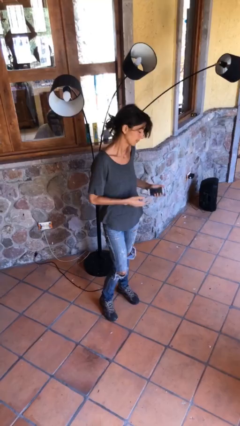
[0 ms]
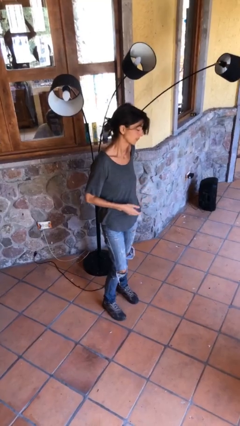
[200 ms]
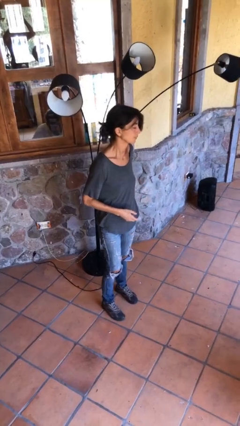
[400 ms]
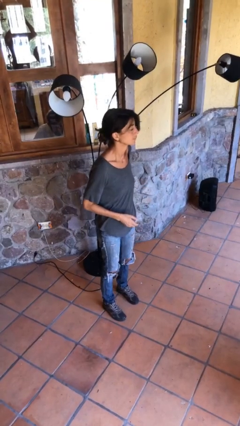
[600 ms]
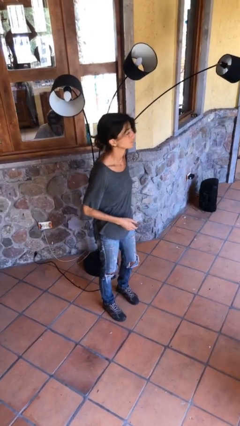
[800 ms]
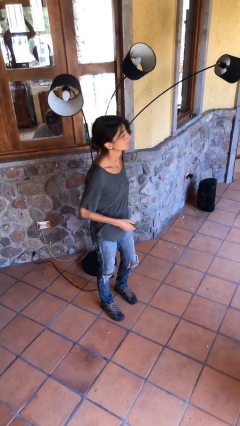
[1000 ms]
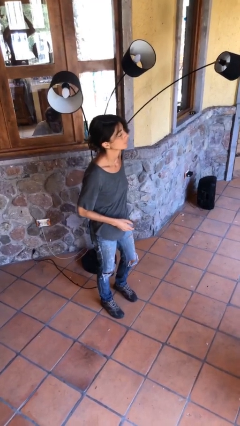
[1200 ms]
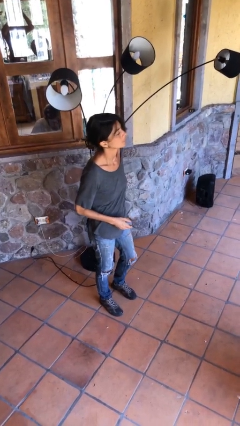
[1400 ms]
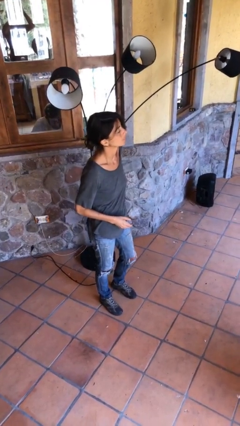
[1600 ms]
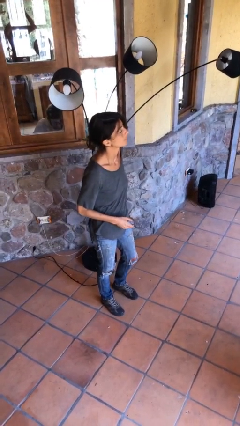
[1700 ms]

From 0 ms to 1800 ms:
person puts phone into pocket

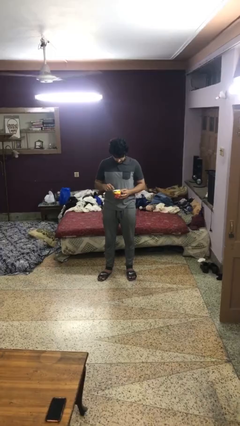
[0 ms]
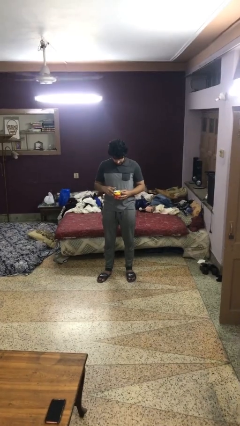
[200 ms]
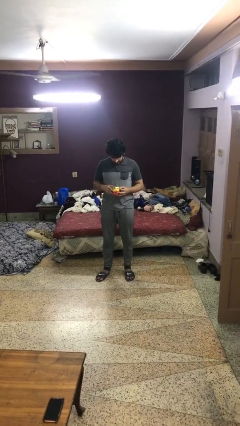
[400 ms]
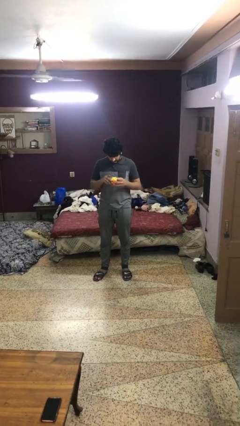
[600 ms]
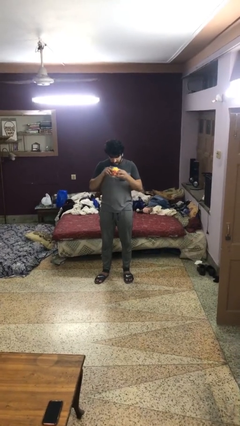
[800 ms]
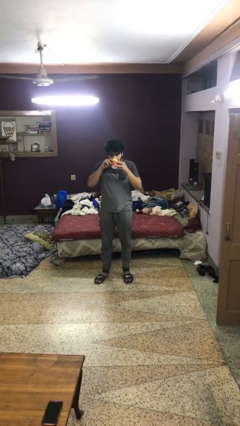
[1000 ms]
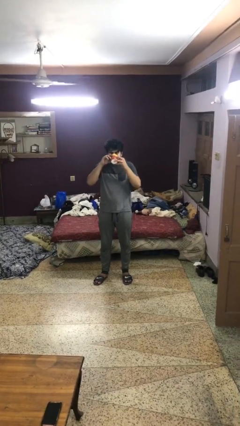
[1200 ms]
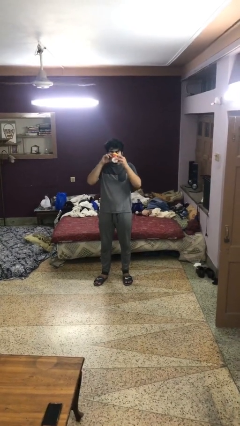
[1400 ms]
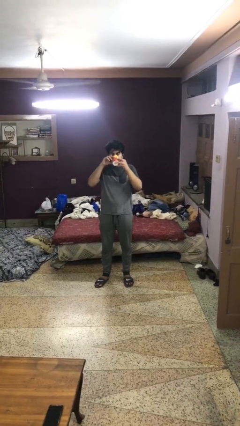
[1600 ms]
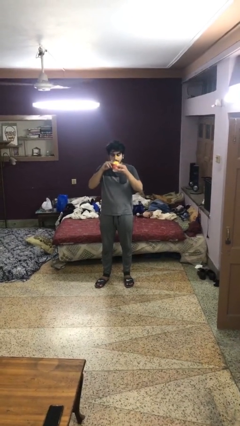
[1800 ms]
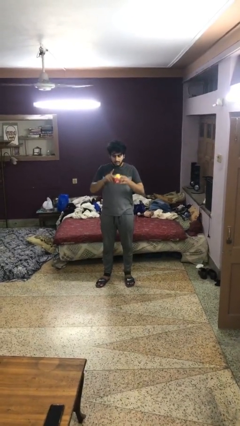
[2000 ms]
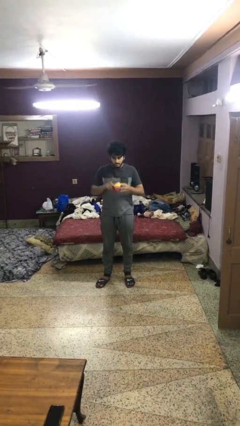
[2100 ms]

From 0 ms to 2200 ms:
person drinks from mug

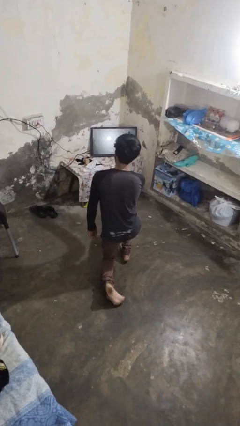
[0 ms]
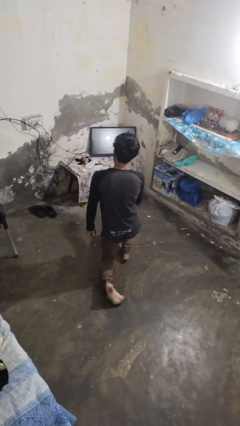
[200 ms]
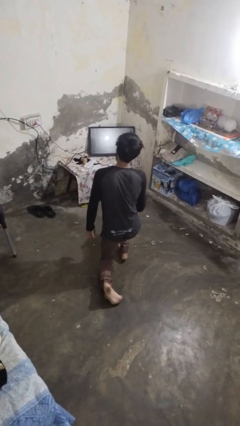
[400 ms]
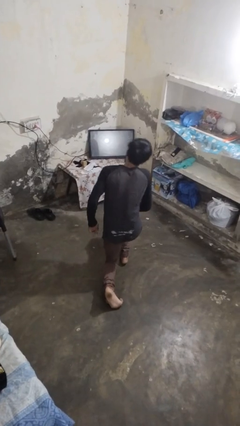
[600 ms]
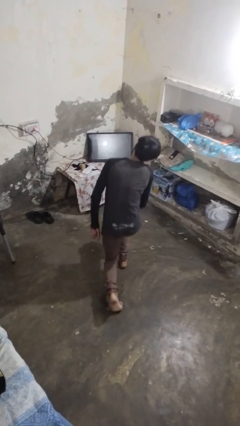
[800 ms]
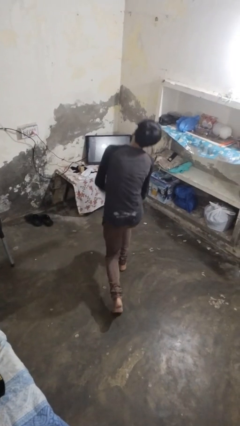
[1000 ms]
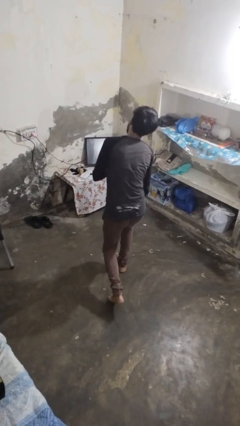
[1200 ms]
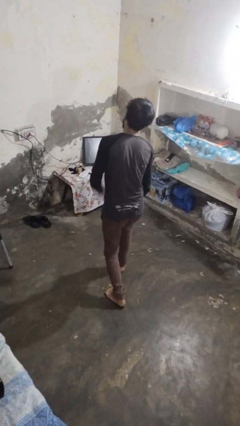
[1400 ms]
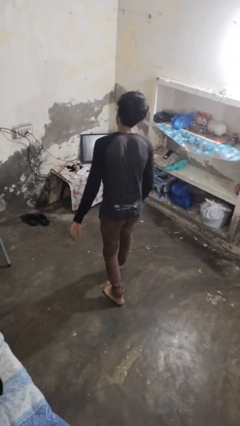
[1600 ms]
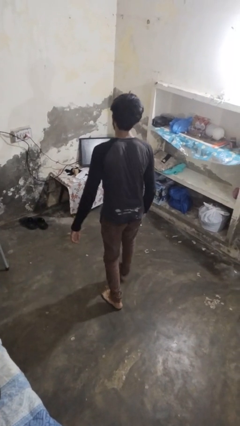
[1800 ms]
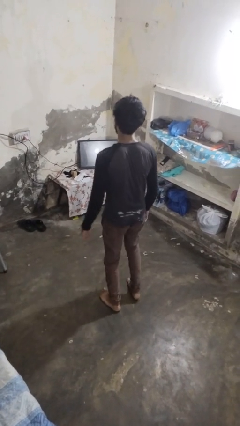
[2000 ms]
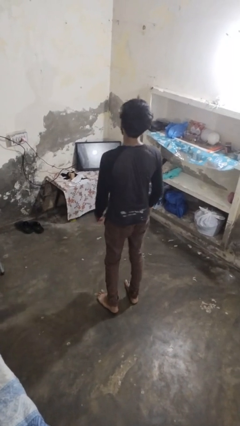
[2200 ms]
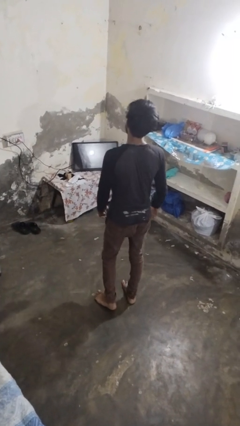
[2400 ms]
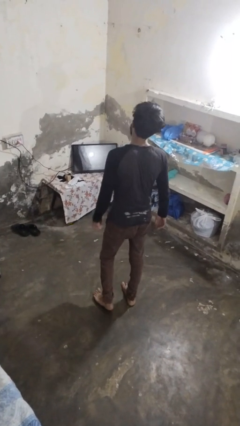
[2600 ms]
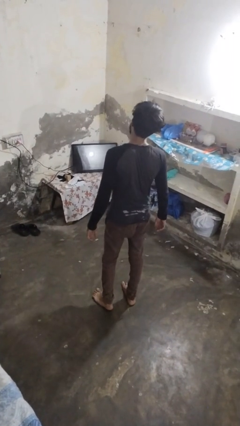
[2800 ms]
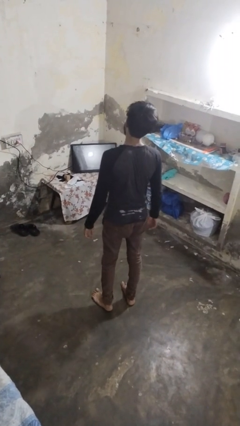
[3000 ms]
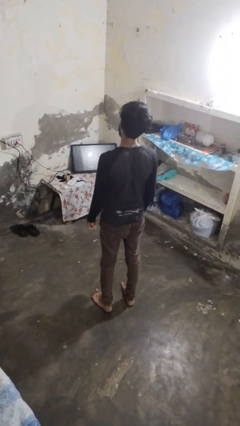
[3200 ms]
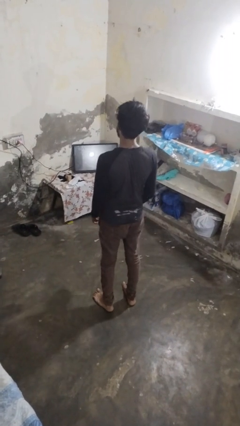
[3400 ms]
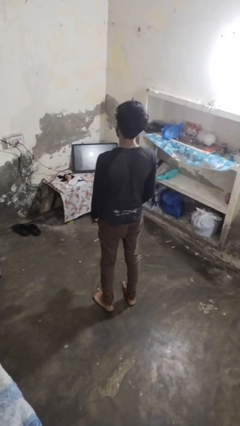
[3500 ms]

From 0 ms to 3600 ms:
person stands up from floor

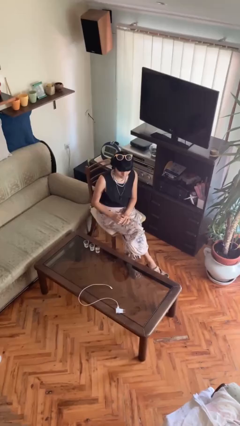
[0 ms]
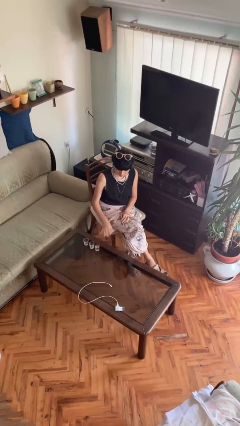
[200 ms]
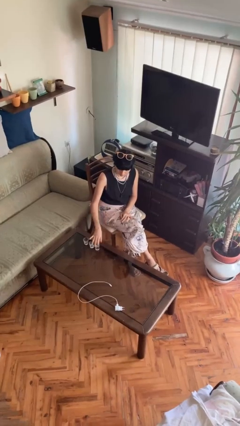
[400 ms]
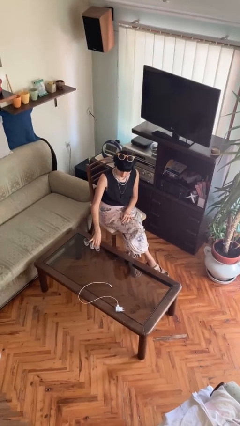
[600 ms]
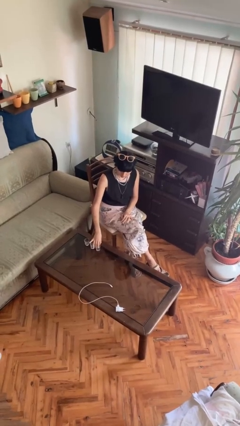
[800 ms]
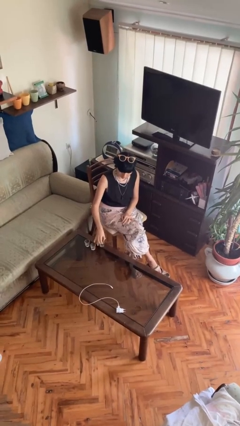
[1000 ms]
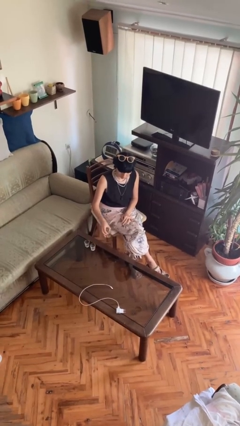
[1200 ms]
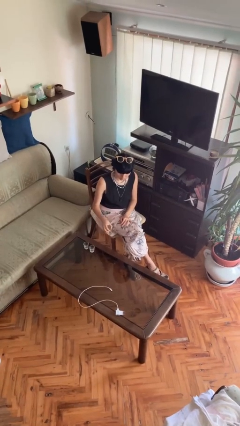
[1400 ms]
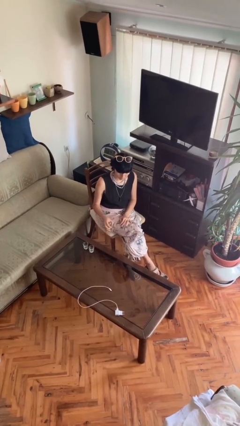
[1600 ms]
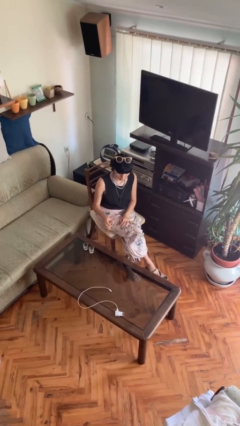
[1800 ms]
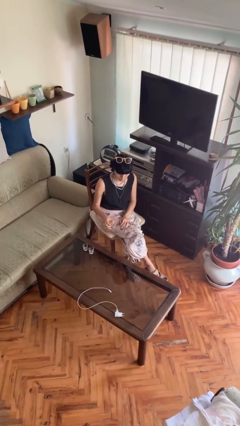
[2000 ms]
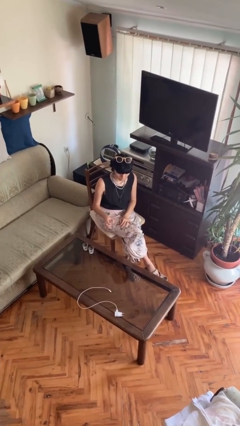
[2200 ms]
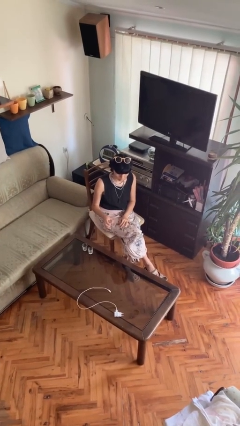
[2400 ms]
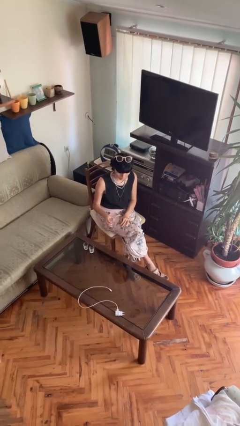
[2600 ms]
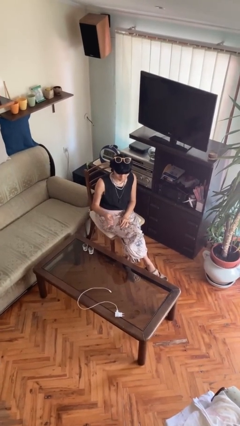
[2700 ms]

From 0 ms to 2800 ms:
person picks up object from table

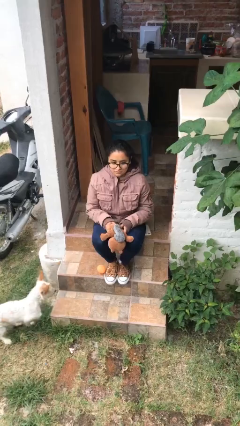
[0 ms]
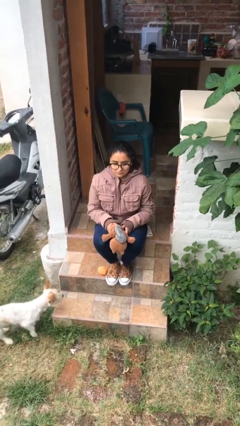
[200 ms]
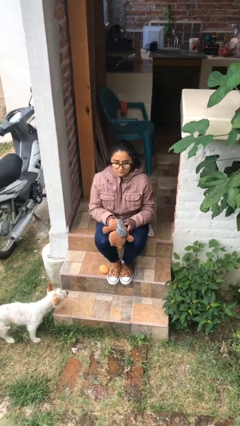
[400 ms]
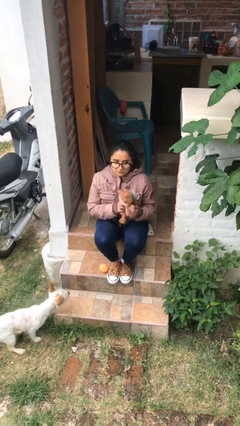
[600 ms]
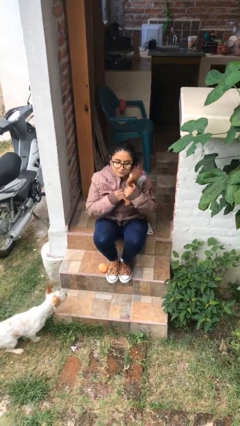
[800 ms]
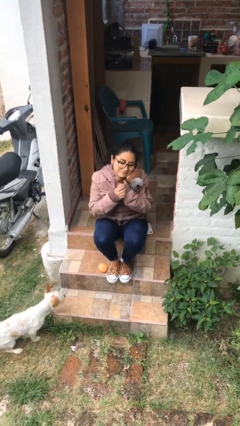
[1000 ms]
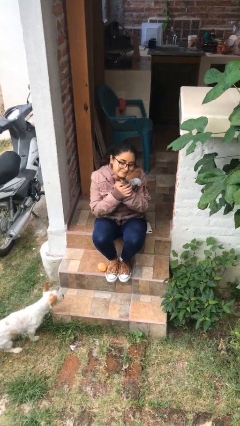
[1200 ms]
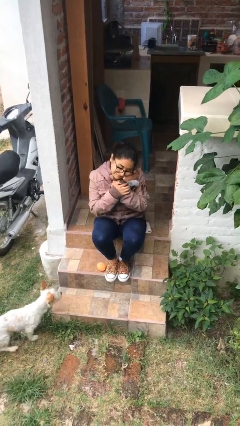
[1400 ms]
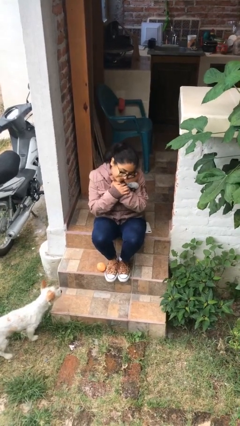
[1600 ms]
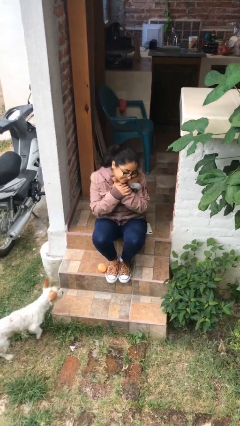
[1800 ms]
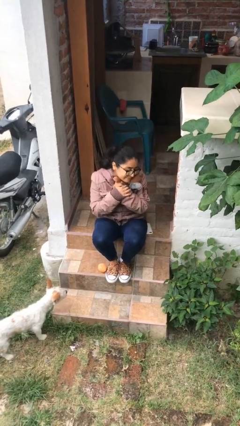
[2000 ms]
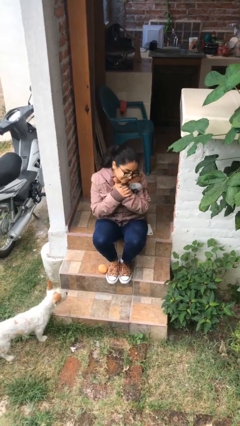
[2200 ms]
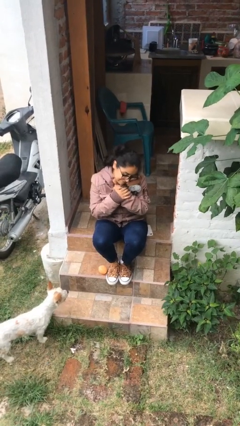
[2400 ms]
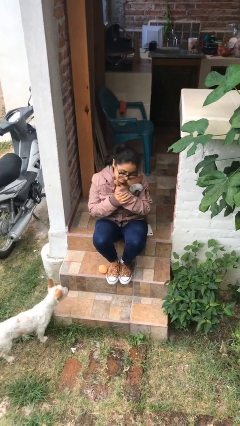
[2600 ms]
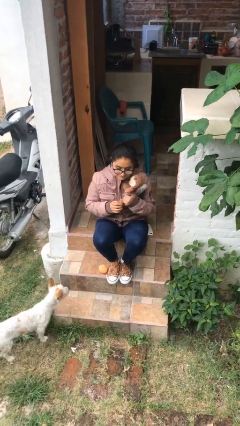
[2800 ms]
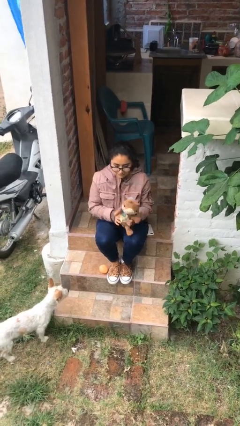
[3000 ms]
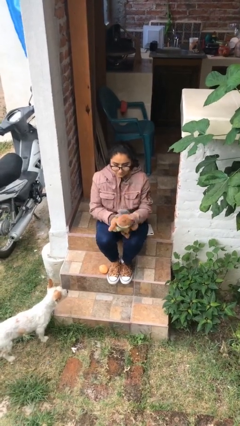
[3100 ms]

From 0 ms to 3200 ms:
person hugs stuffed animal

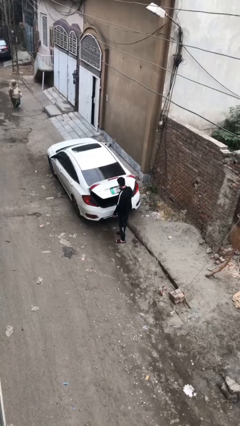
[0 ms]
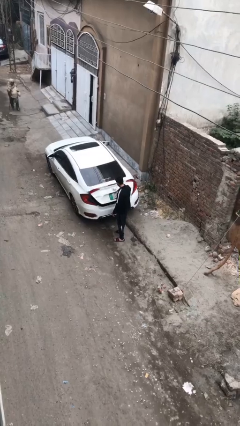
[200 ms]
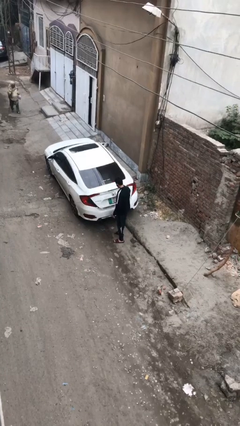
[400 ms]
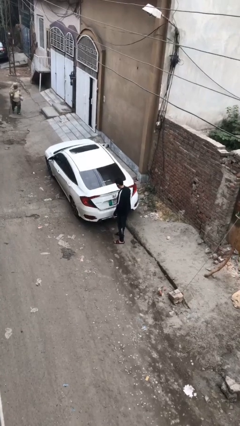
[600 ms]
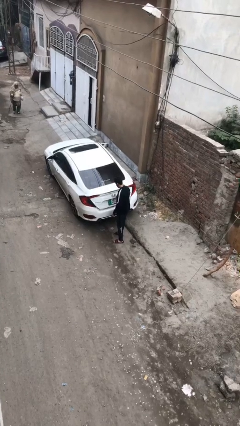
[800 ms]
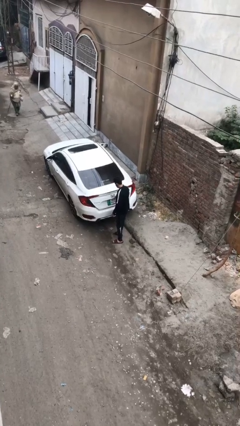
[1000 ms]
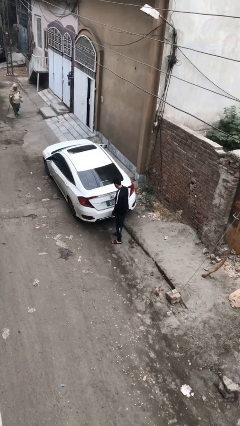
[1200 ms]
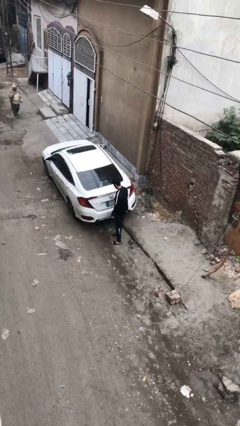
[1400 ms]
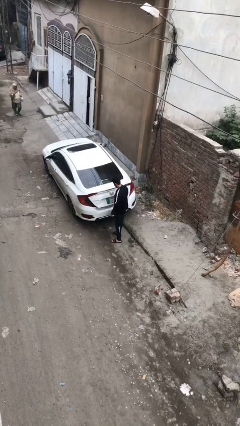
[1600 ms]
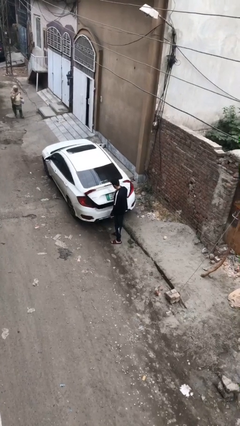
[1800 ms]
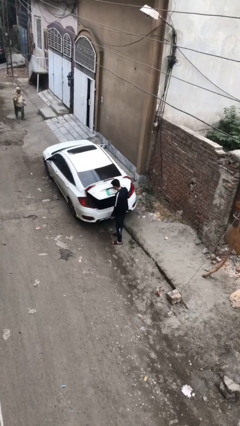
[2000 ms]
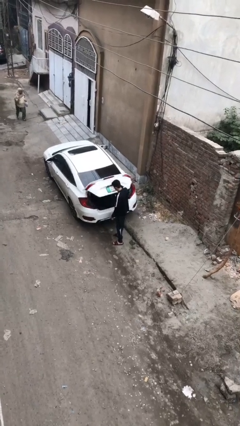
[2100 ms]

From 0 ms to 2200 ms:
person closes car trunk

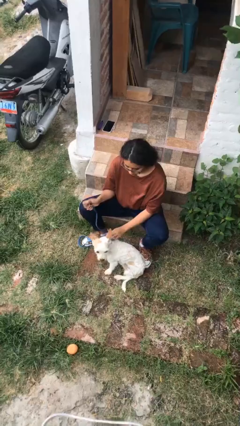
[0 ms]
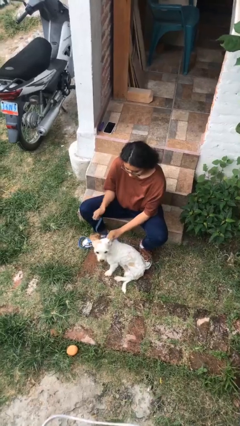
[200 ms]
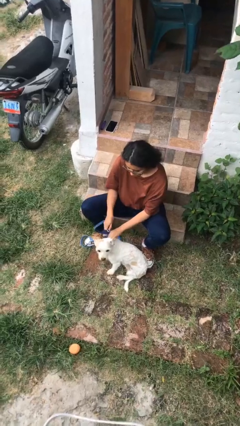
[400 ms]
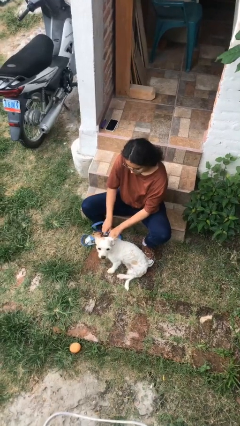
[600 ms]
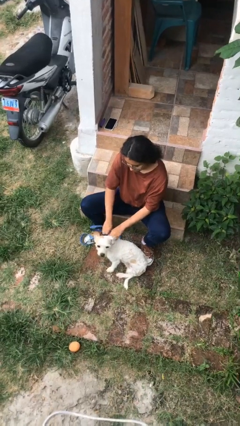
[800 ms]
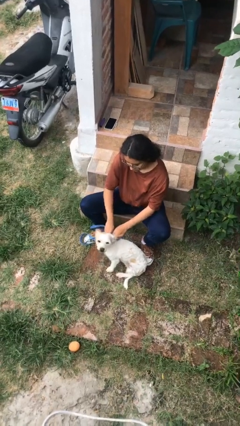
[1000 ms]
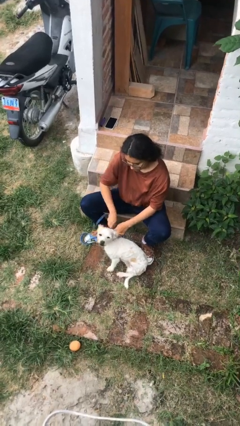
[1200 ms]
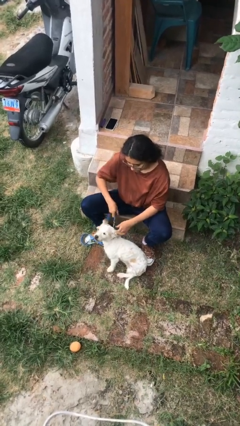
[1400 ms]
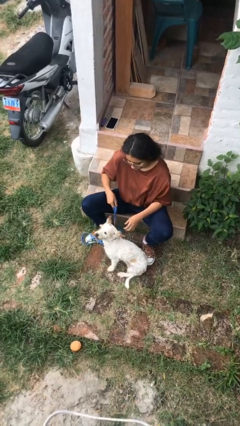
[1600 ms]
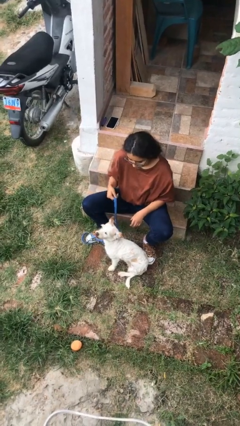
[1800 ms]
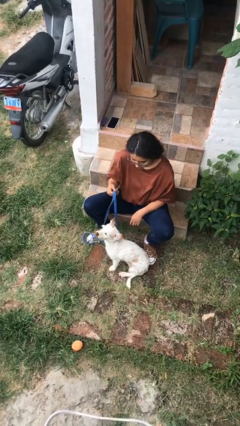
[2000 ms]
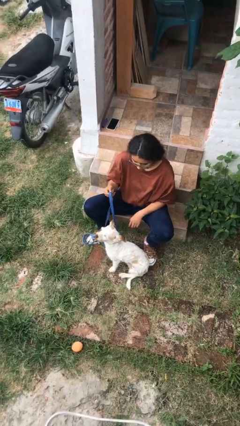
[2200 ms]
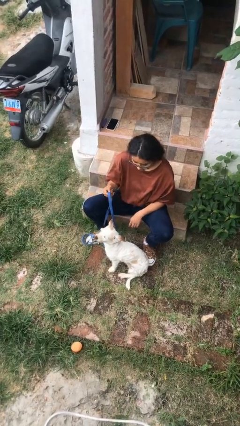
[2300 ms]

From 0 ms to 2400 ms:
person attaches leash to dog
